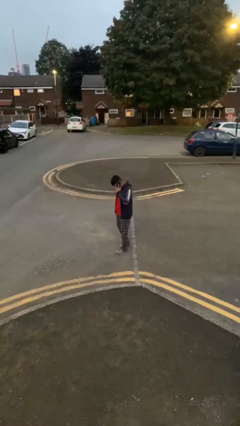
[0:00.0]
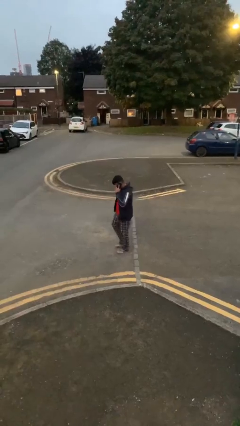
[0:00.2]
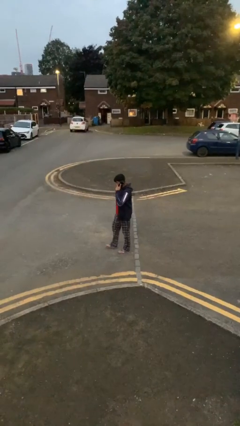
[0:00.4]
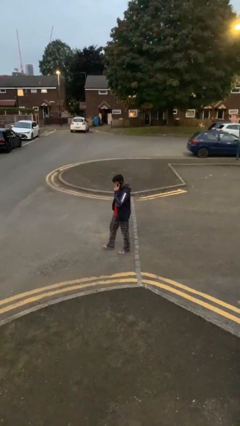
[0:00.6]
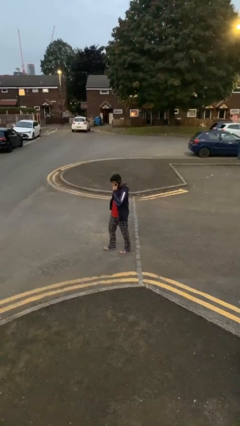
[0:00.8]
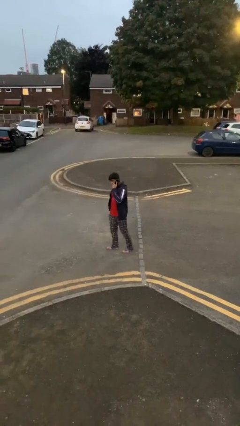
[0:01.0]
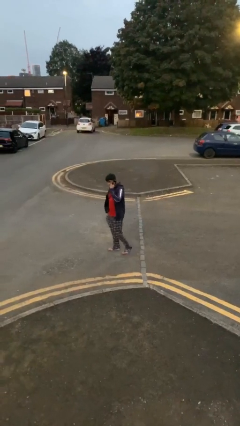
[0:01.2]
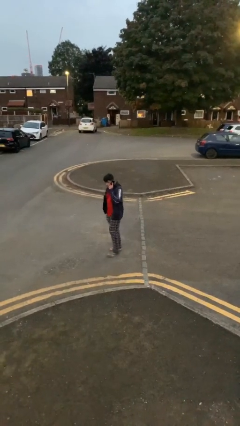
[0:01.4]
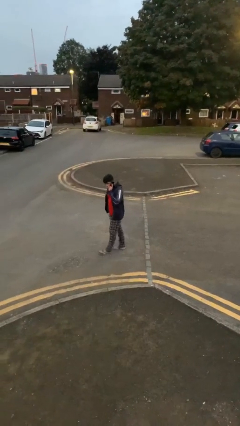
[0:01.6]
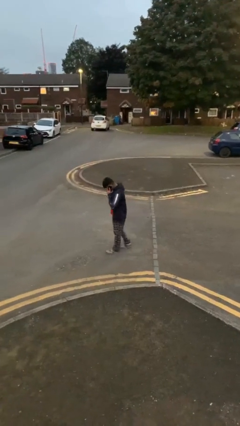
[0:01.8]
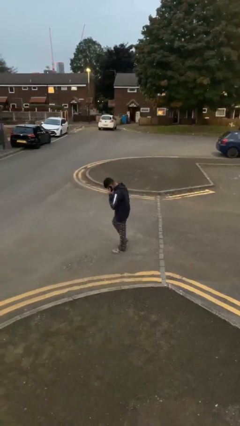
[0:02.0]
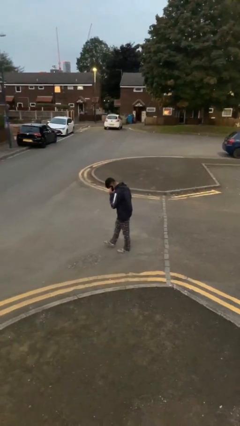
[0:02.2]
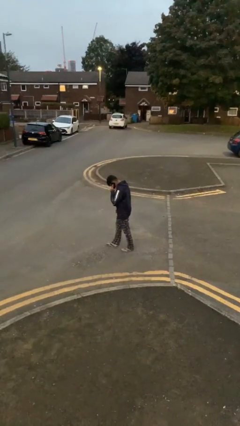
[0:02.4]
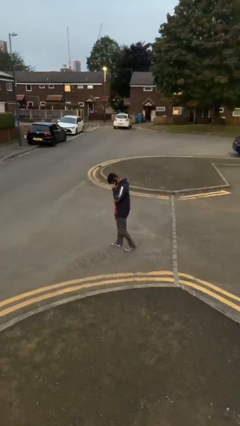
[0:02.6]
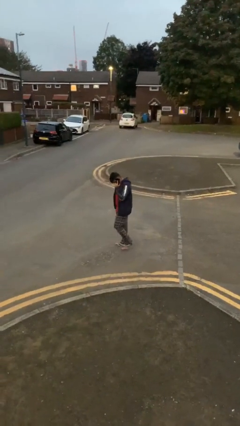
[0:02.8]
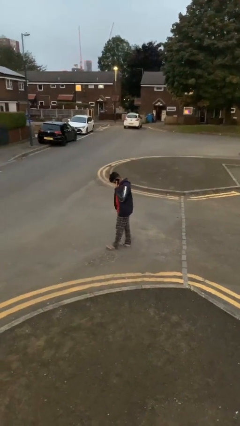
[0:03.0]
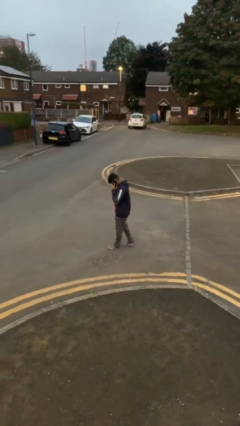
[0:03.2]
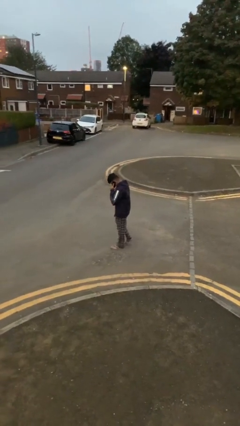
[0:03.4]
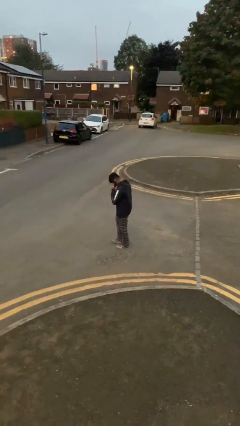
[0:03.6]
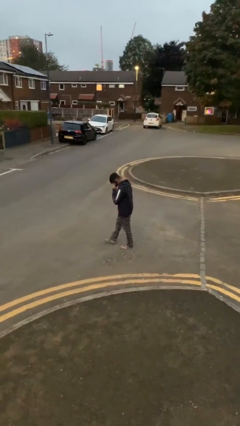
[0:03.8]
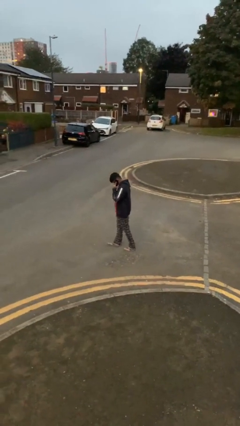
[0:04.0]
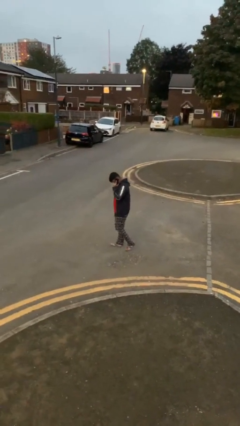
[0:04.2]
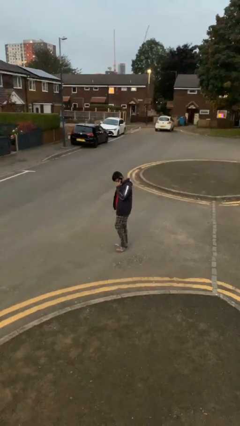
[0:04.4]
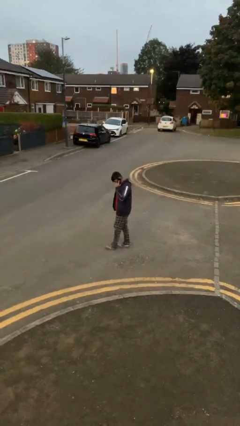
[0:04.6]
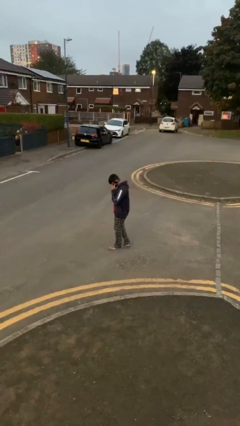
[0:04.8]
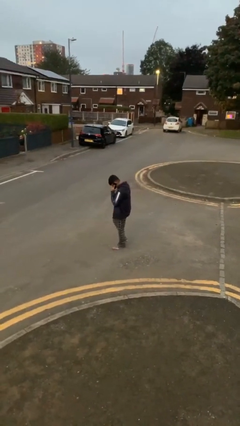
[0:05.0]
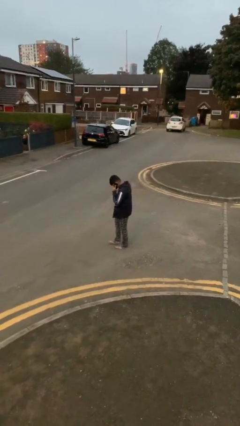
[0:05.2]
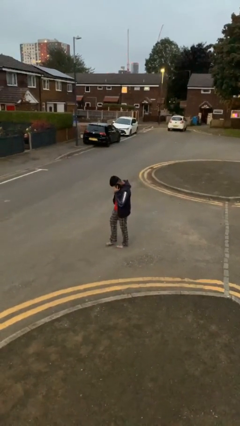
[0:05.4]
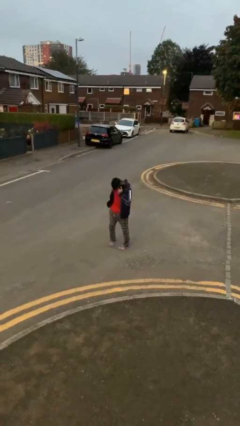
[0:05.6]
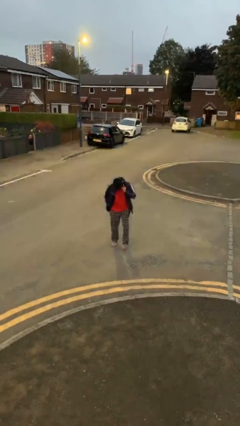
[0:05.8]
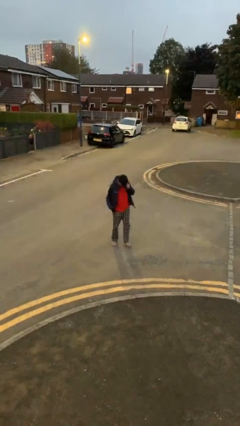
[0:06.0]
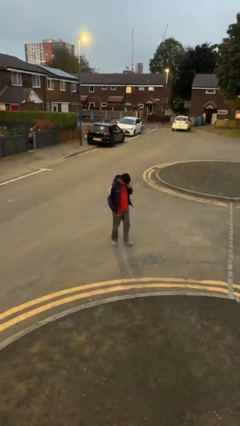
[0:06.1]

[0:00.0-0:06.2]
person talks on phone

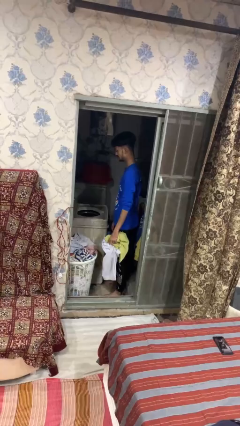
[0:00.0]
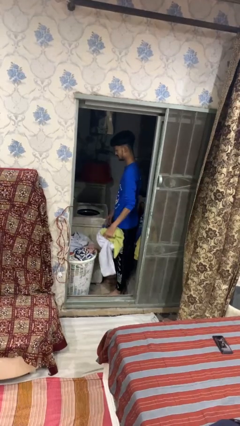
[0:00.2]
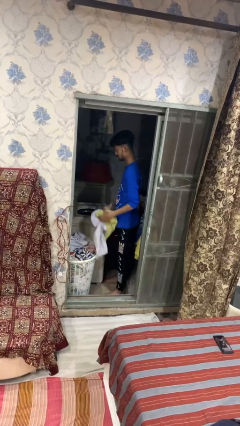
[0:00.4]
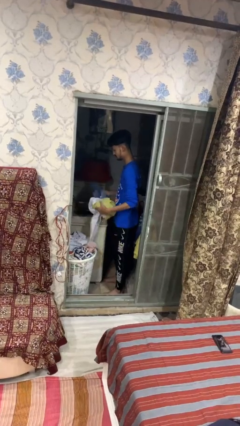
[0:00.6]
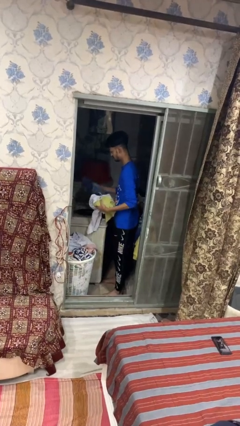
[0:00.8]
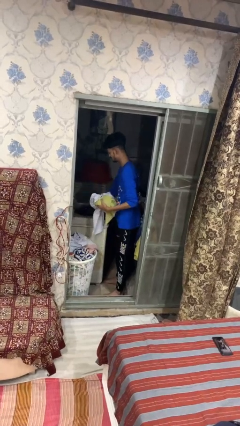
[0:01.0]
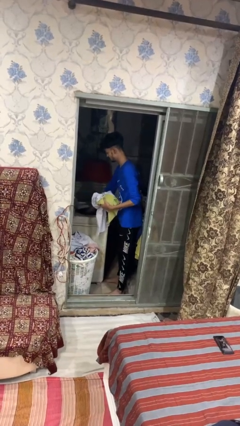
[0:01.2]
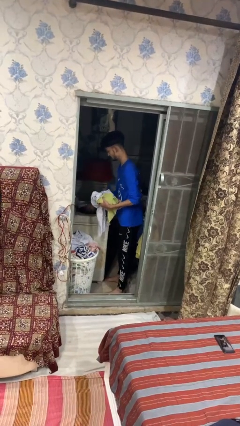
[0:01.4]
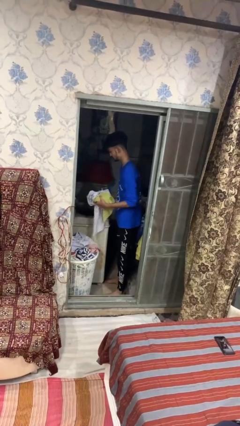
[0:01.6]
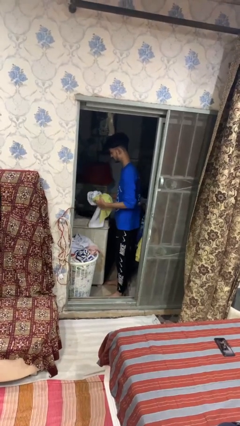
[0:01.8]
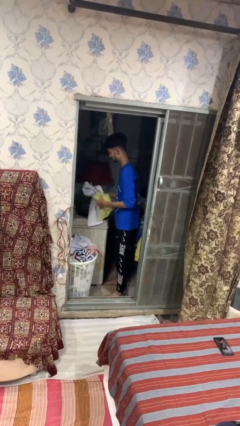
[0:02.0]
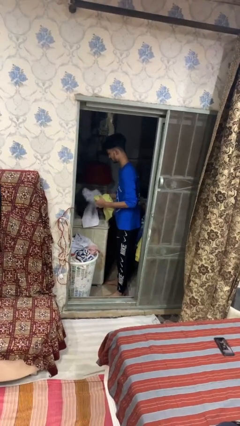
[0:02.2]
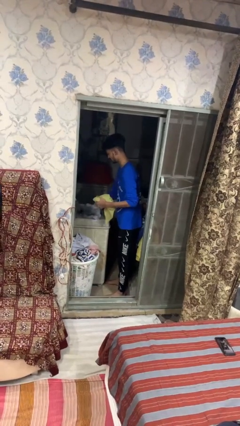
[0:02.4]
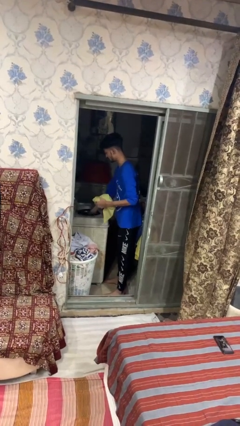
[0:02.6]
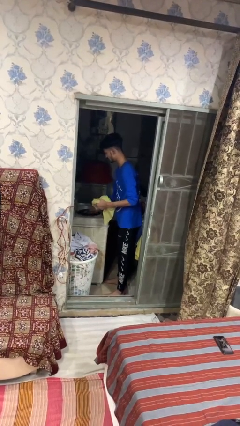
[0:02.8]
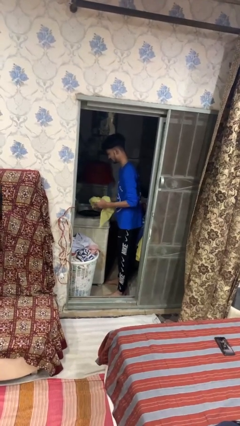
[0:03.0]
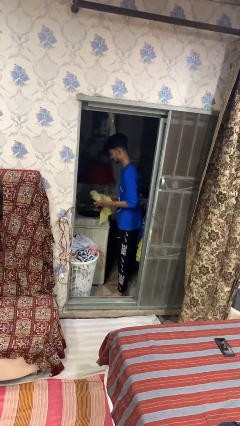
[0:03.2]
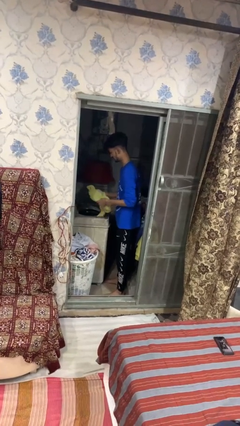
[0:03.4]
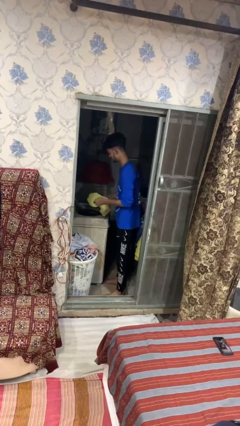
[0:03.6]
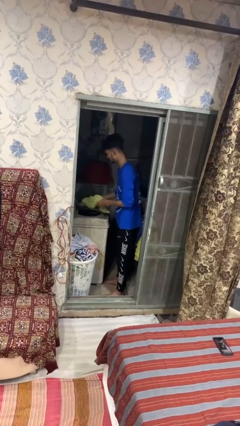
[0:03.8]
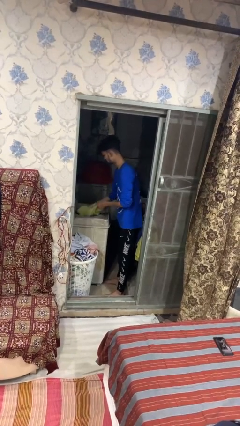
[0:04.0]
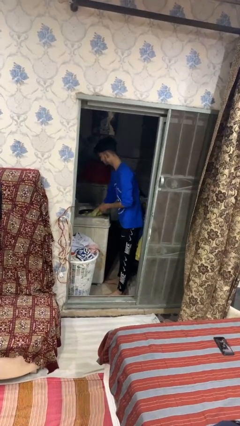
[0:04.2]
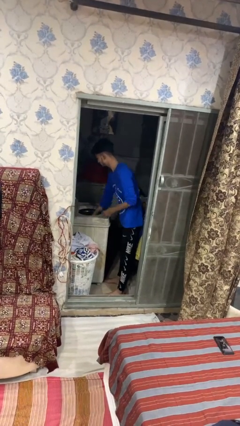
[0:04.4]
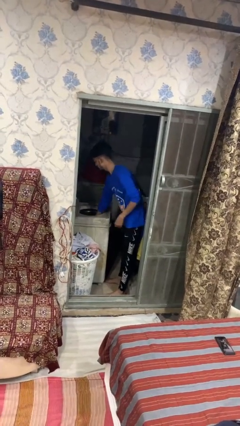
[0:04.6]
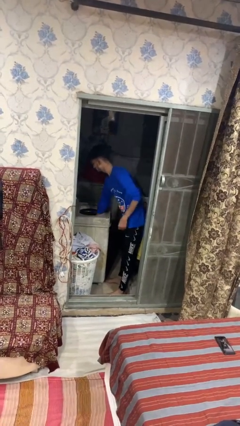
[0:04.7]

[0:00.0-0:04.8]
person loads dryer

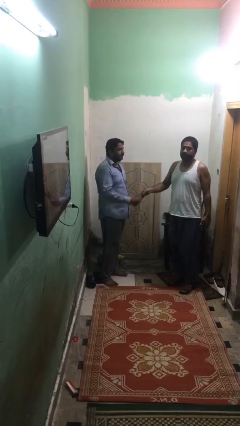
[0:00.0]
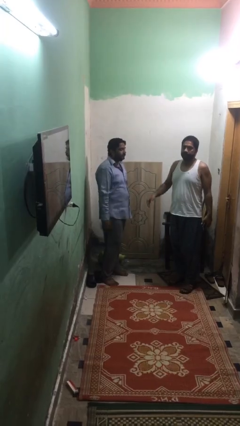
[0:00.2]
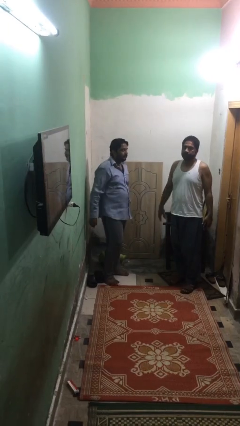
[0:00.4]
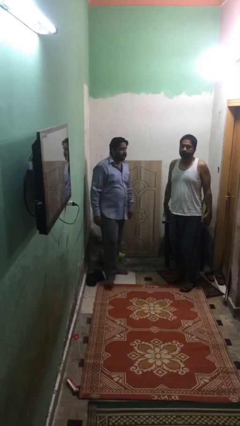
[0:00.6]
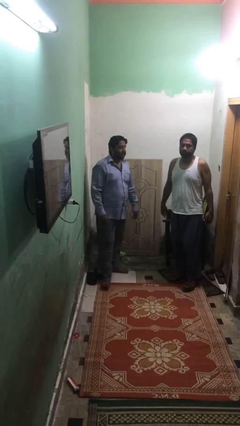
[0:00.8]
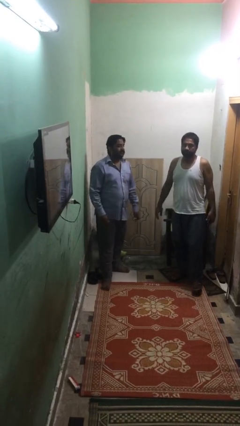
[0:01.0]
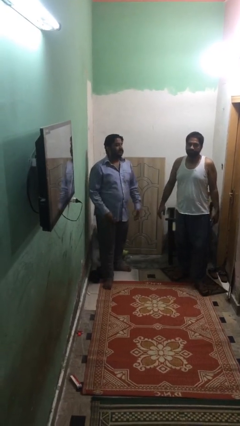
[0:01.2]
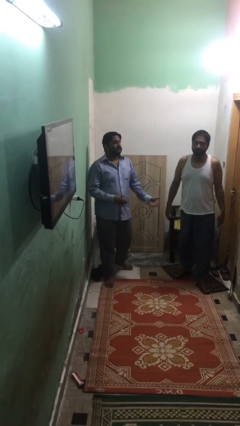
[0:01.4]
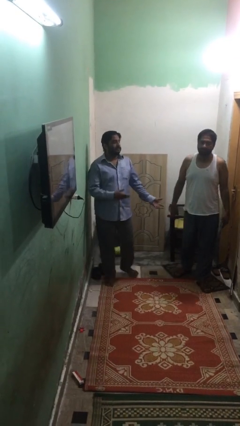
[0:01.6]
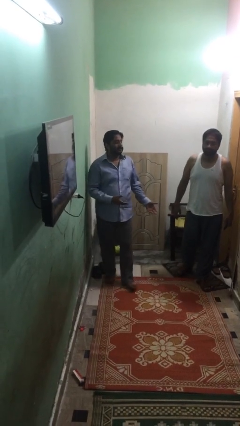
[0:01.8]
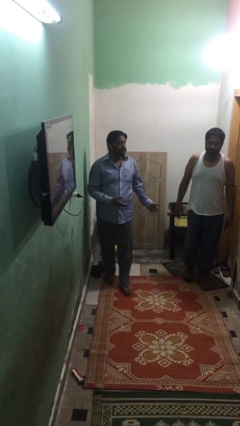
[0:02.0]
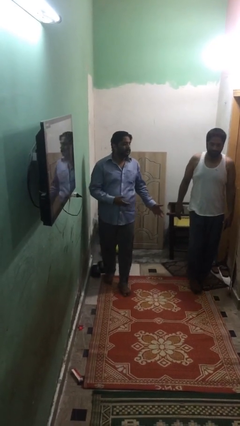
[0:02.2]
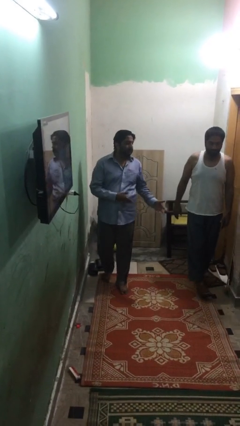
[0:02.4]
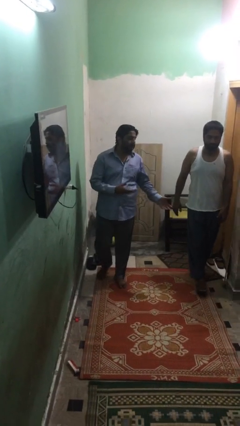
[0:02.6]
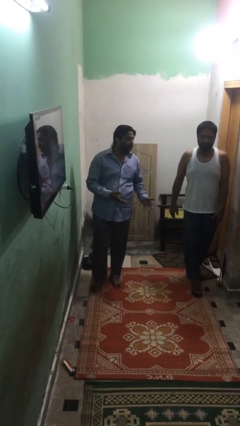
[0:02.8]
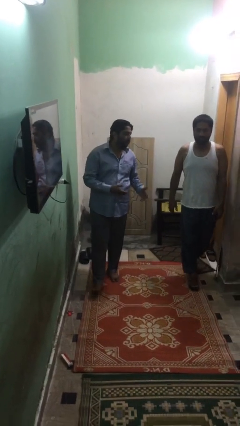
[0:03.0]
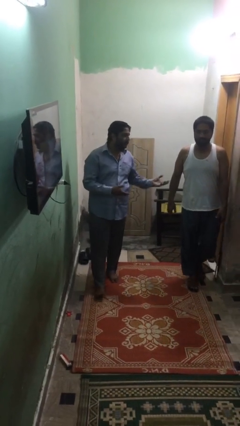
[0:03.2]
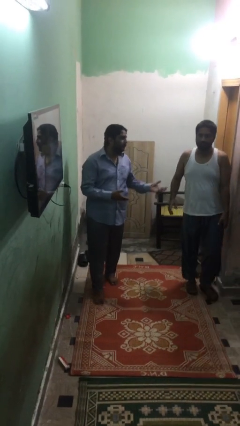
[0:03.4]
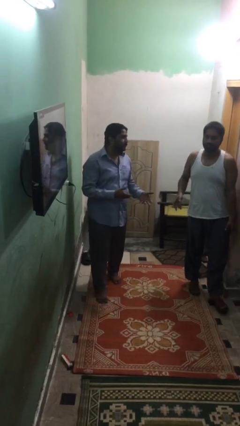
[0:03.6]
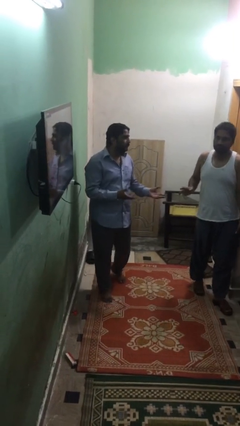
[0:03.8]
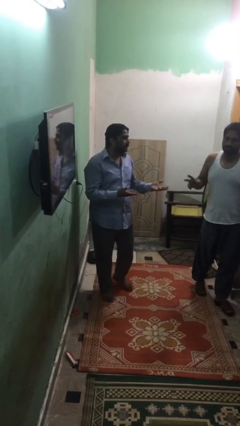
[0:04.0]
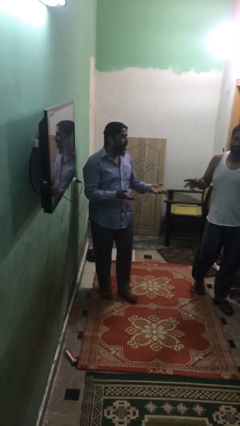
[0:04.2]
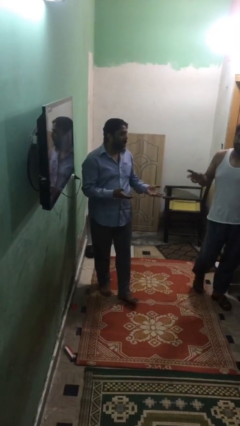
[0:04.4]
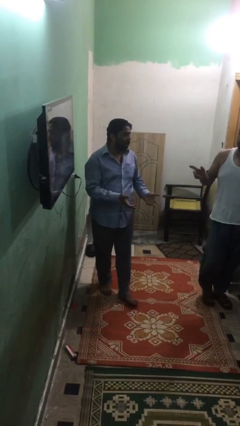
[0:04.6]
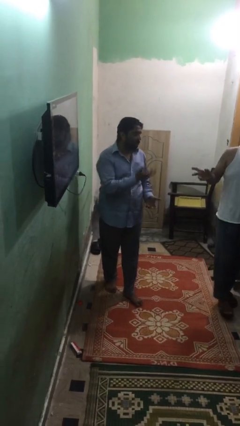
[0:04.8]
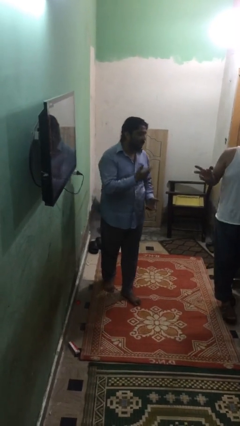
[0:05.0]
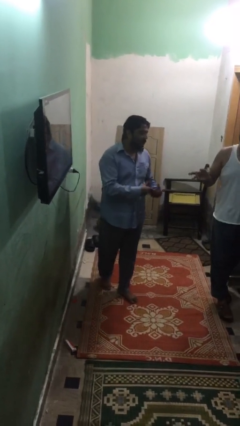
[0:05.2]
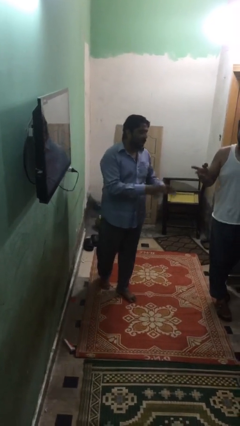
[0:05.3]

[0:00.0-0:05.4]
person talks to person

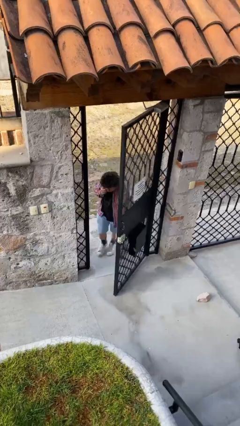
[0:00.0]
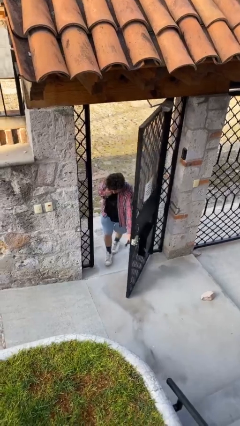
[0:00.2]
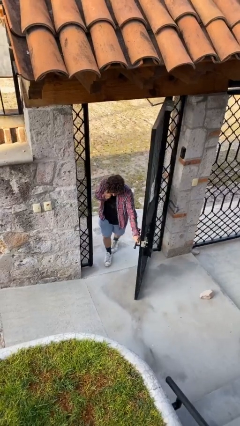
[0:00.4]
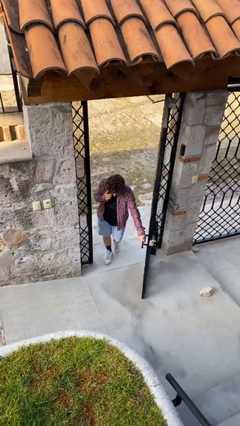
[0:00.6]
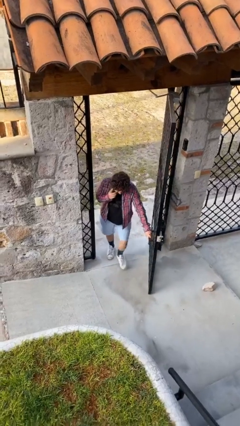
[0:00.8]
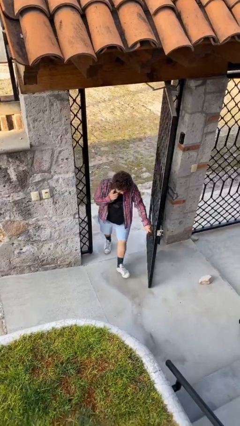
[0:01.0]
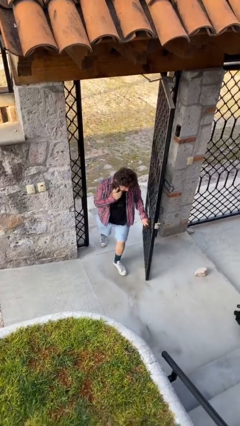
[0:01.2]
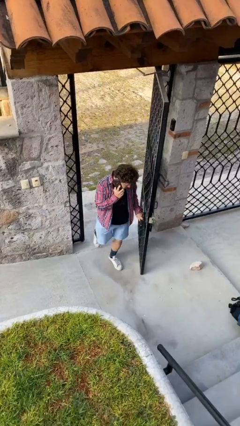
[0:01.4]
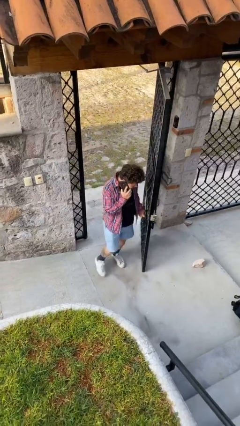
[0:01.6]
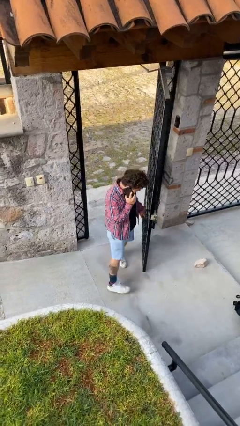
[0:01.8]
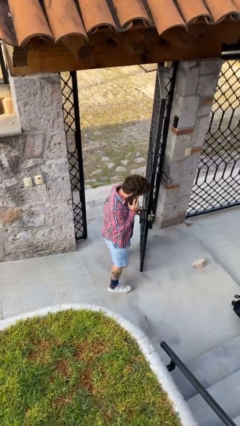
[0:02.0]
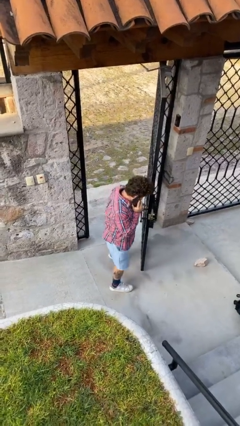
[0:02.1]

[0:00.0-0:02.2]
person enters scene through structure
